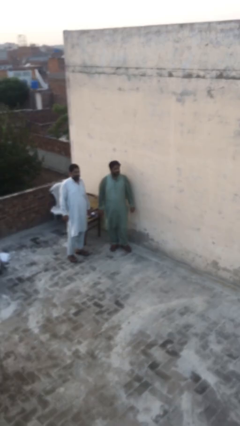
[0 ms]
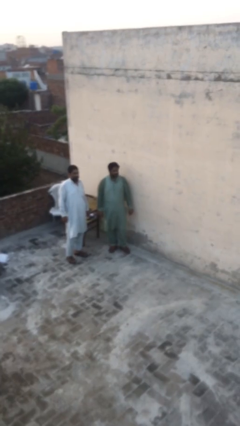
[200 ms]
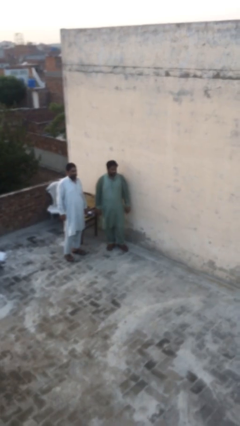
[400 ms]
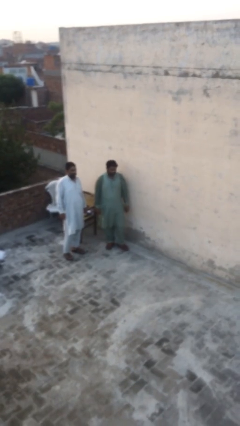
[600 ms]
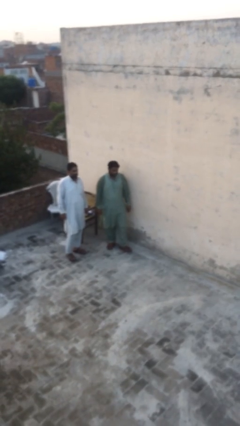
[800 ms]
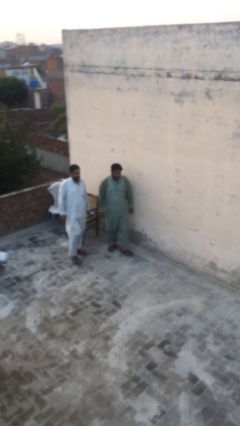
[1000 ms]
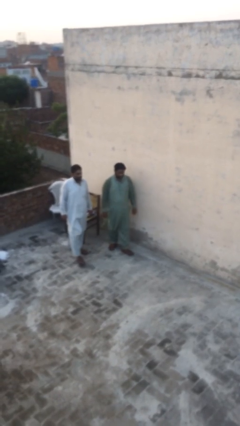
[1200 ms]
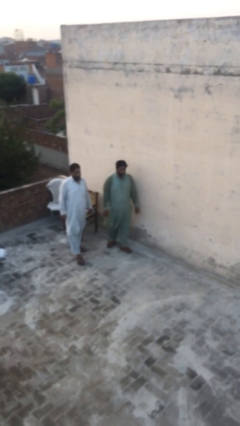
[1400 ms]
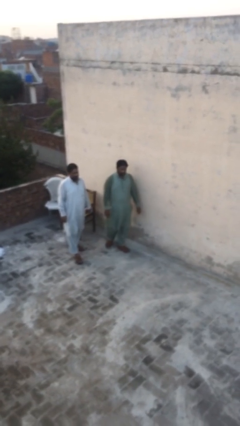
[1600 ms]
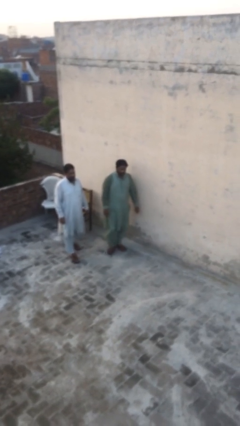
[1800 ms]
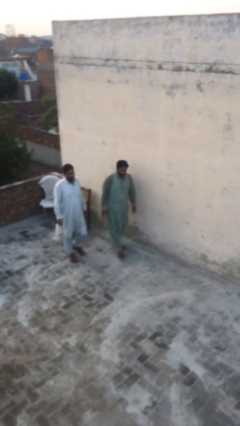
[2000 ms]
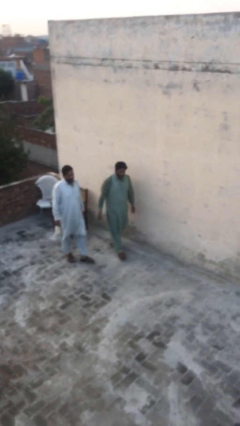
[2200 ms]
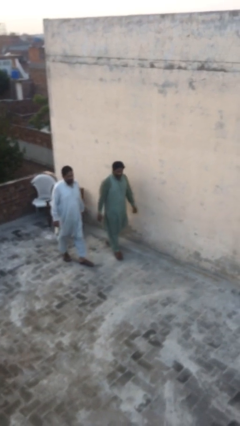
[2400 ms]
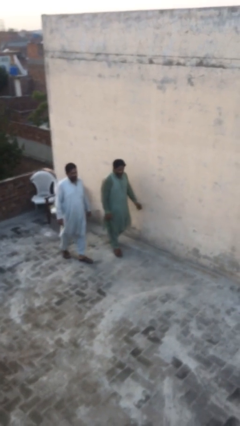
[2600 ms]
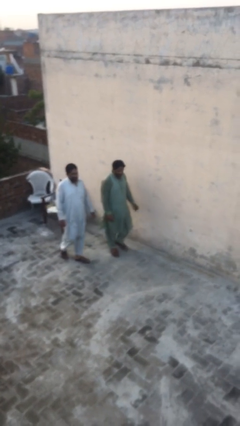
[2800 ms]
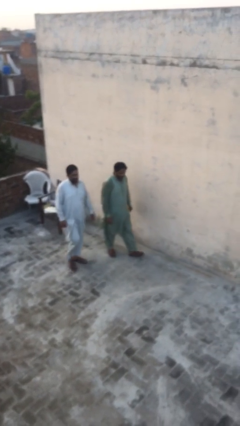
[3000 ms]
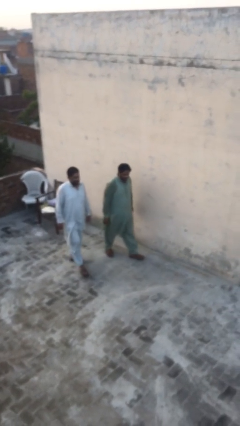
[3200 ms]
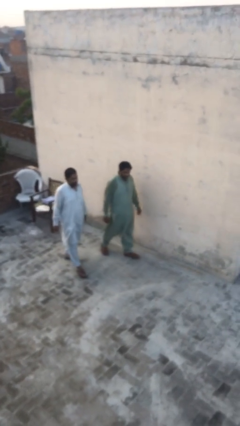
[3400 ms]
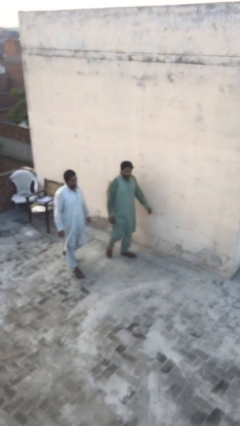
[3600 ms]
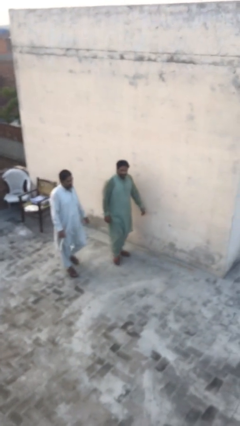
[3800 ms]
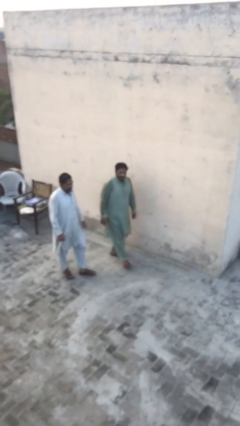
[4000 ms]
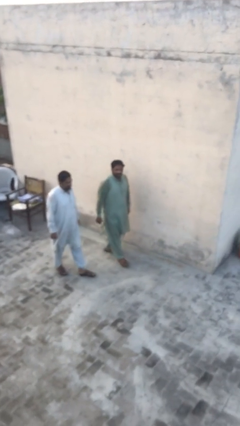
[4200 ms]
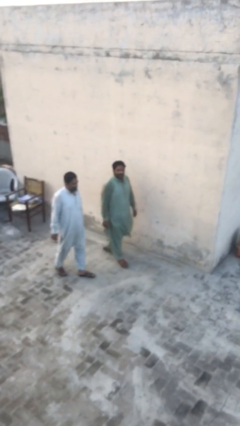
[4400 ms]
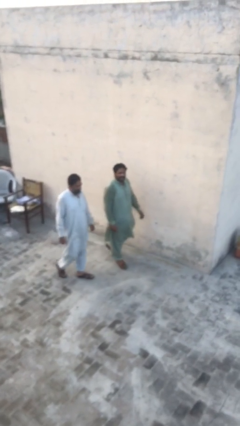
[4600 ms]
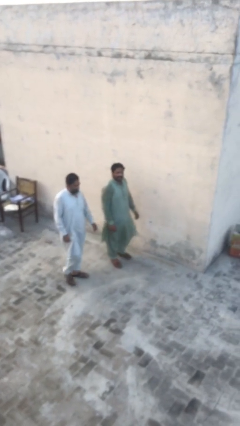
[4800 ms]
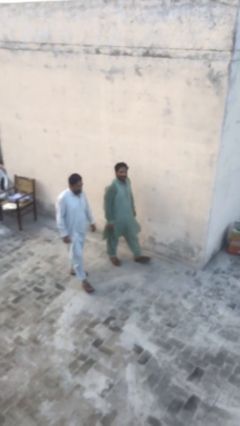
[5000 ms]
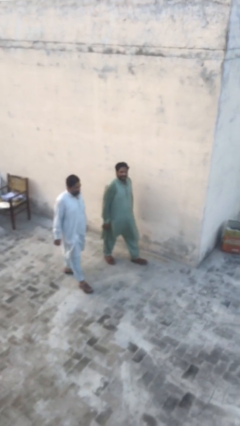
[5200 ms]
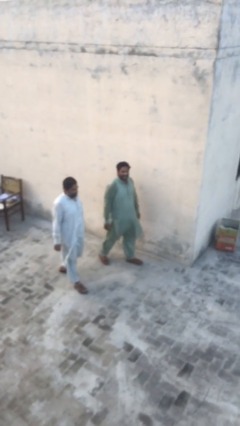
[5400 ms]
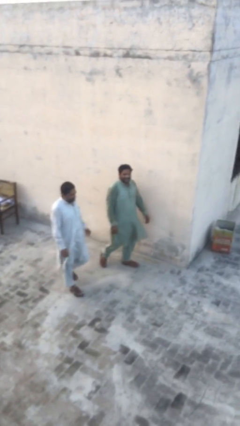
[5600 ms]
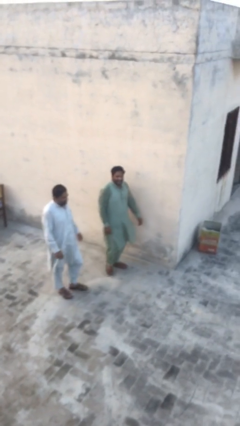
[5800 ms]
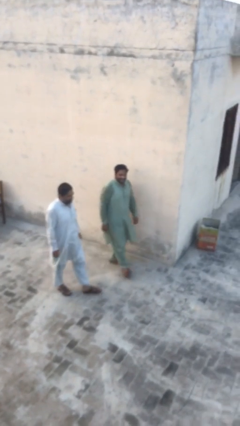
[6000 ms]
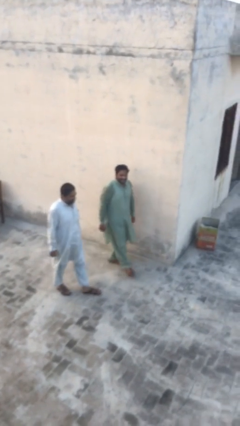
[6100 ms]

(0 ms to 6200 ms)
person talks to person

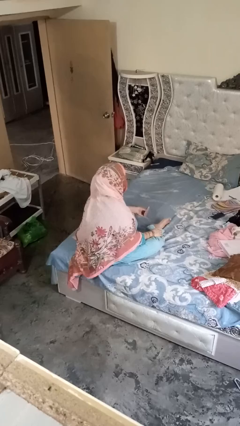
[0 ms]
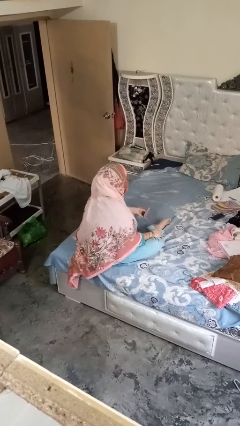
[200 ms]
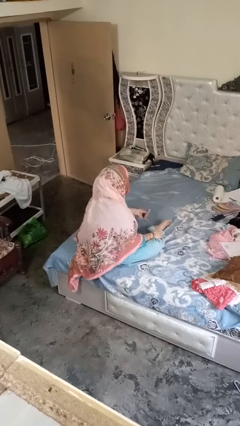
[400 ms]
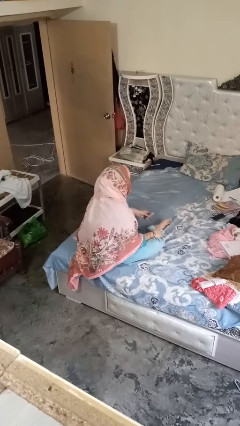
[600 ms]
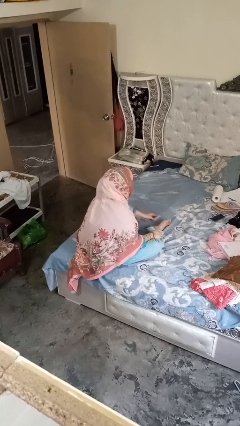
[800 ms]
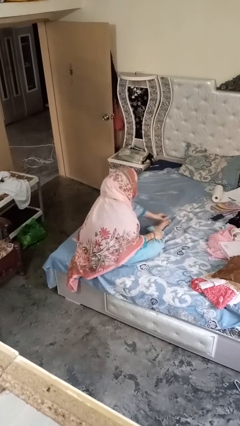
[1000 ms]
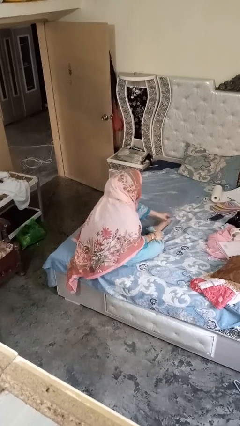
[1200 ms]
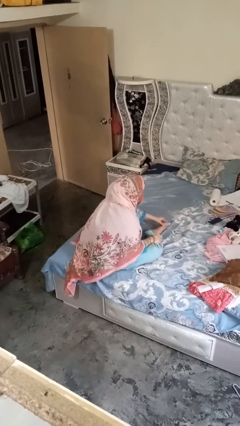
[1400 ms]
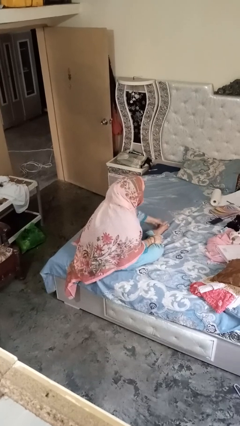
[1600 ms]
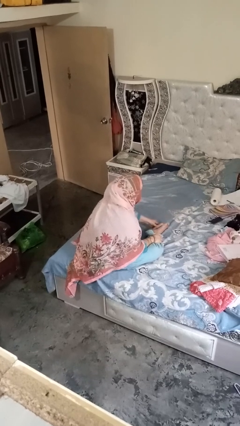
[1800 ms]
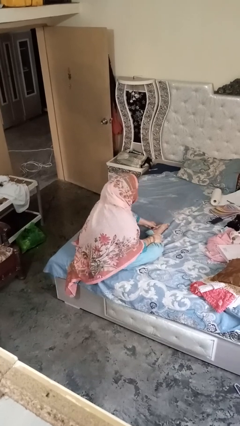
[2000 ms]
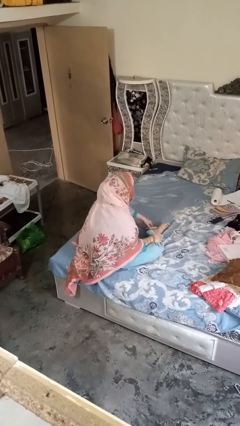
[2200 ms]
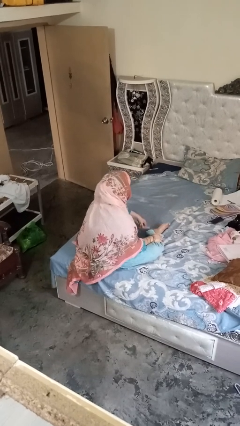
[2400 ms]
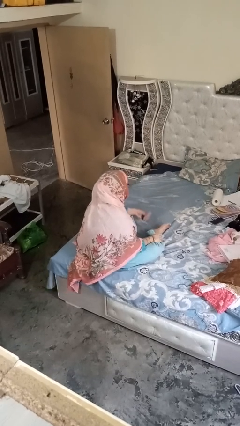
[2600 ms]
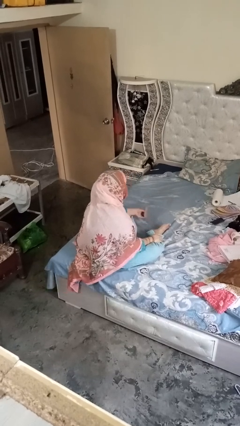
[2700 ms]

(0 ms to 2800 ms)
person rubs foot

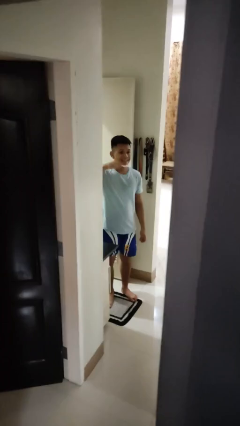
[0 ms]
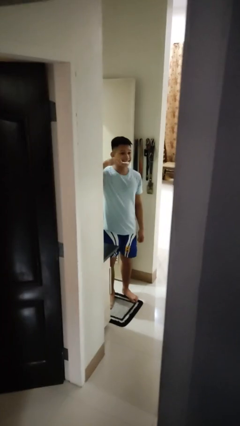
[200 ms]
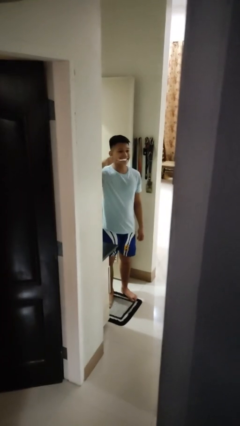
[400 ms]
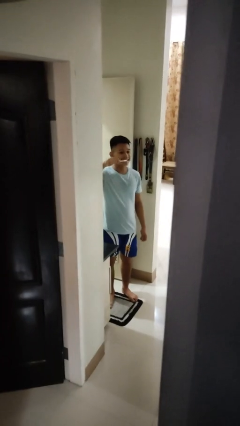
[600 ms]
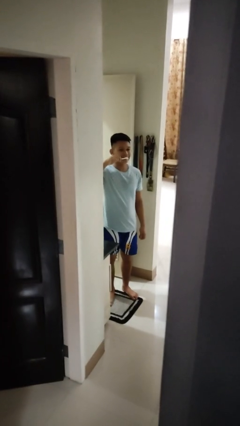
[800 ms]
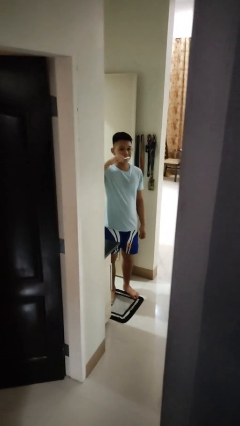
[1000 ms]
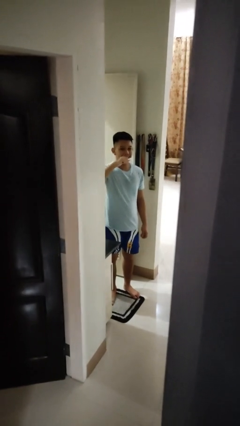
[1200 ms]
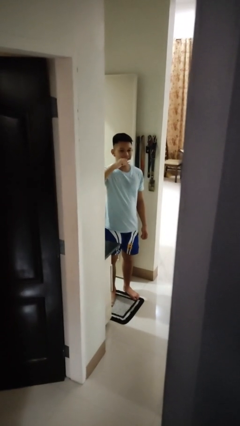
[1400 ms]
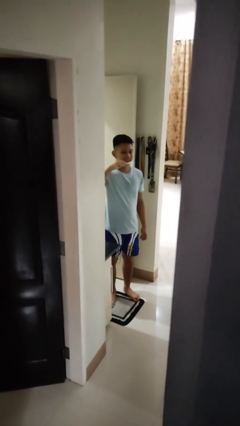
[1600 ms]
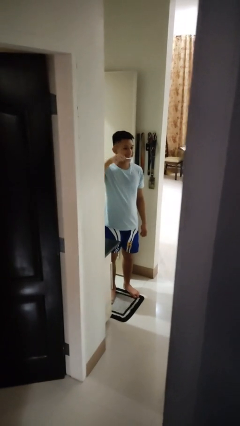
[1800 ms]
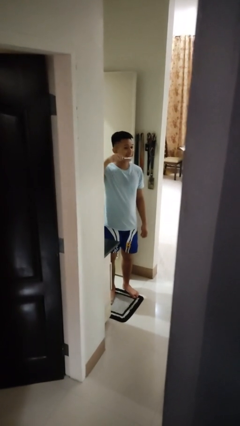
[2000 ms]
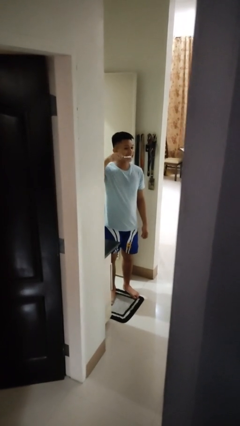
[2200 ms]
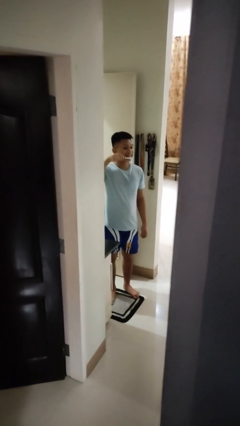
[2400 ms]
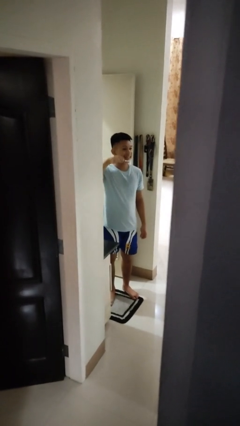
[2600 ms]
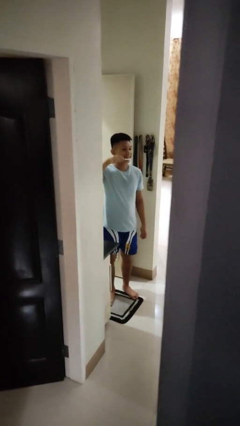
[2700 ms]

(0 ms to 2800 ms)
person brushes teeth

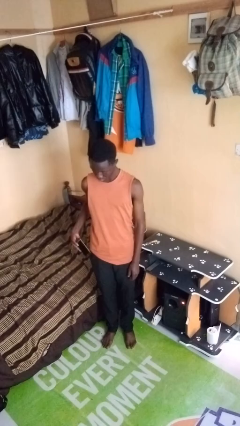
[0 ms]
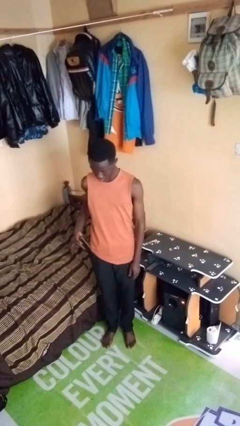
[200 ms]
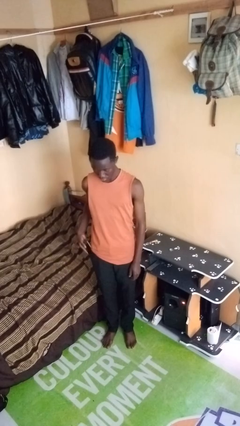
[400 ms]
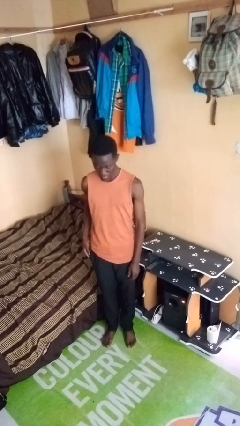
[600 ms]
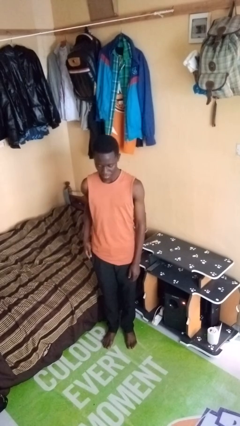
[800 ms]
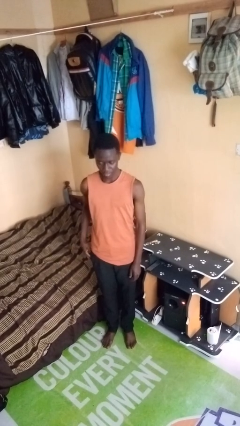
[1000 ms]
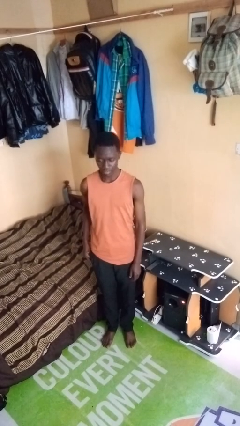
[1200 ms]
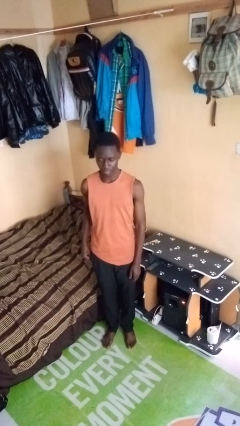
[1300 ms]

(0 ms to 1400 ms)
person puts phone into pocket

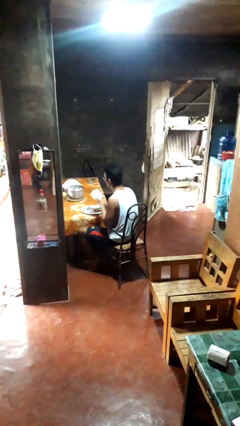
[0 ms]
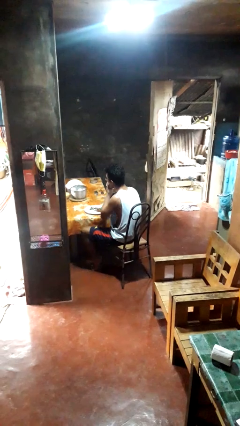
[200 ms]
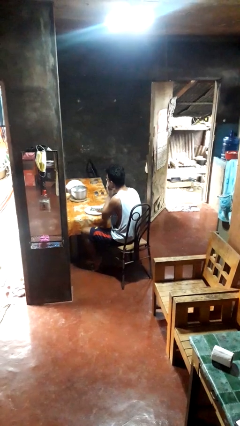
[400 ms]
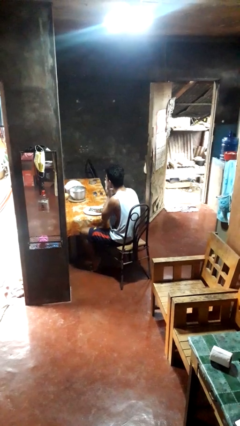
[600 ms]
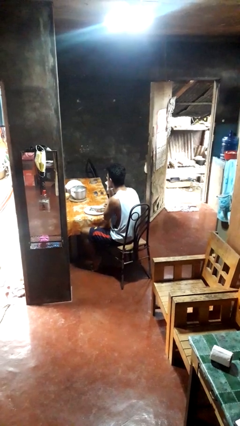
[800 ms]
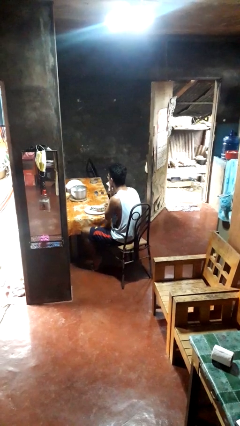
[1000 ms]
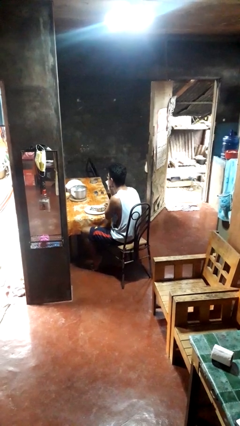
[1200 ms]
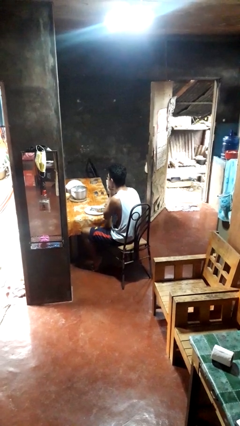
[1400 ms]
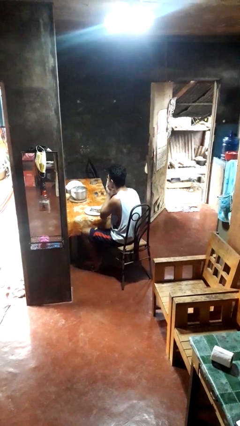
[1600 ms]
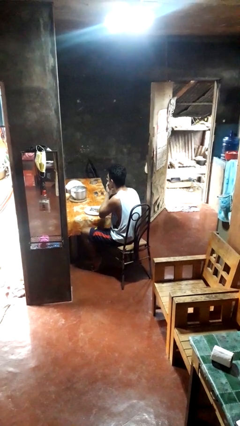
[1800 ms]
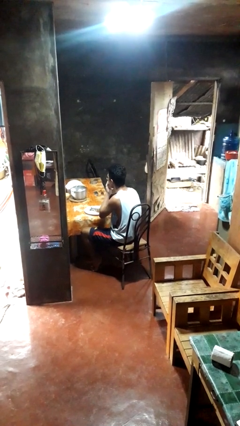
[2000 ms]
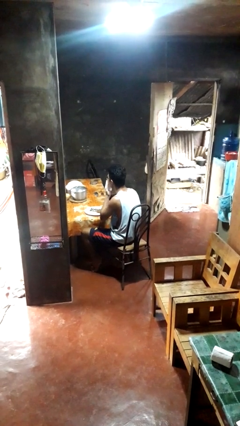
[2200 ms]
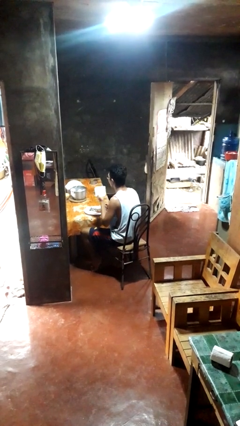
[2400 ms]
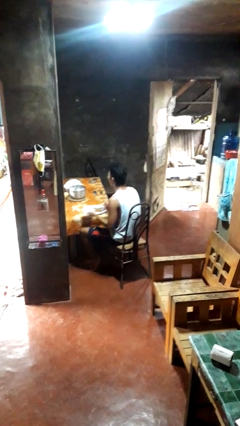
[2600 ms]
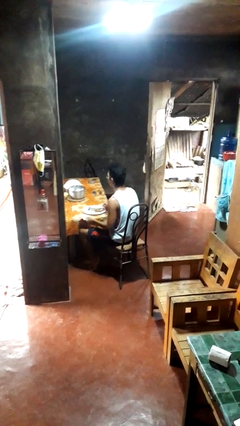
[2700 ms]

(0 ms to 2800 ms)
person wipes mouth with napkin

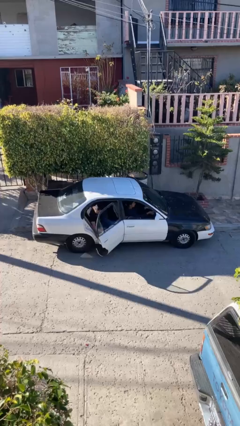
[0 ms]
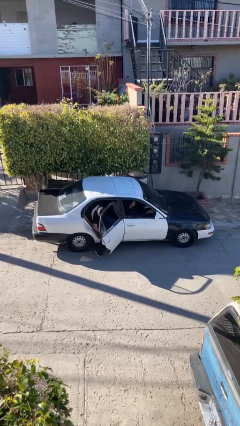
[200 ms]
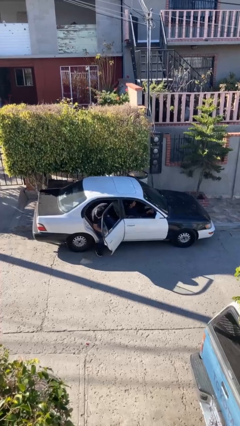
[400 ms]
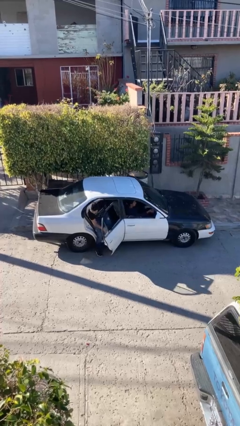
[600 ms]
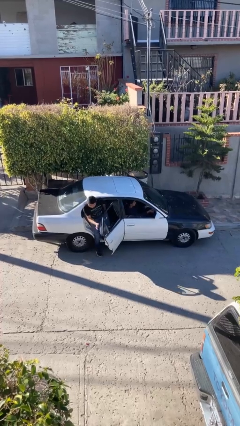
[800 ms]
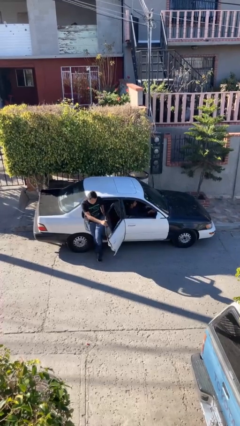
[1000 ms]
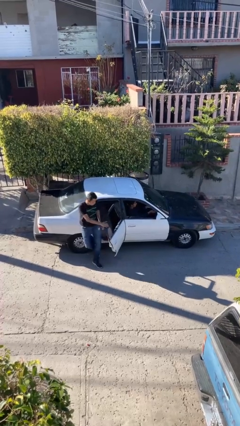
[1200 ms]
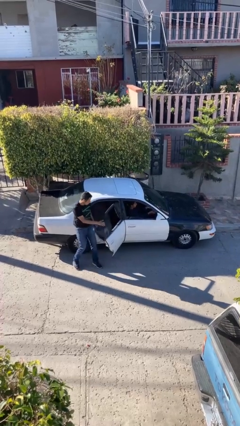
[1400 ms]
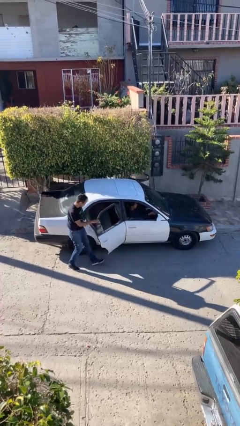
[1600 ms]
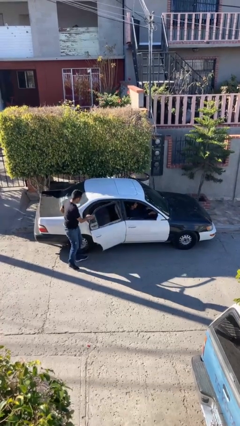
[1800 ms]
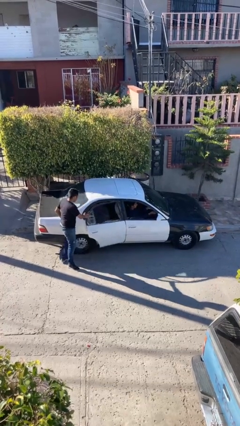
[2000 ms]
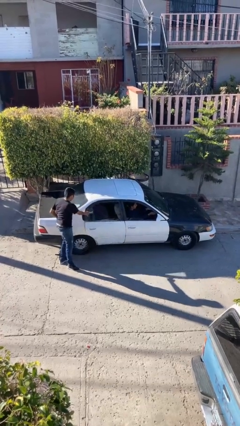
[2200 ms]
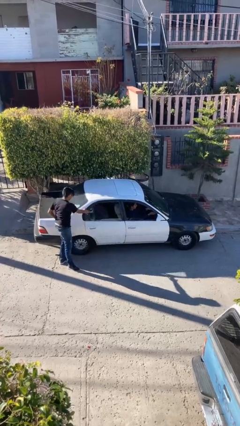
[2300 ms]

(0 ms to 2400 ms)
car drops off person
